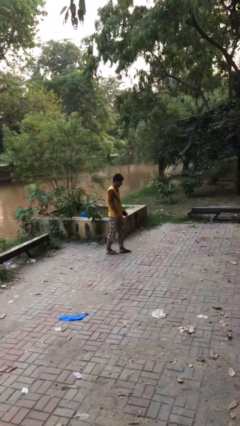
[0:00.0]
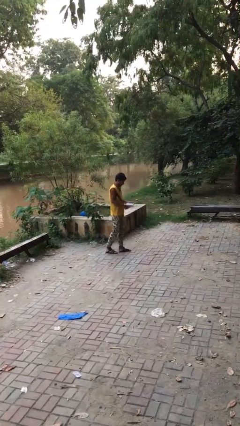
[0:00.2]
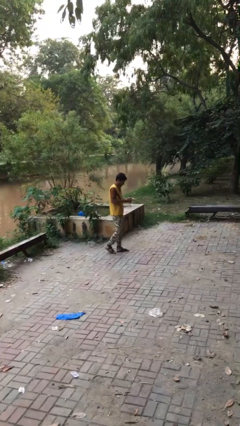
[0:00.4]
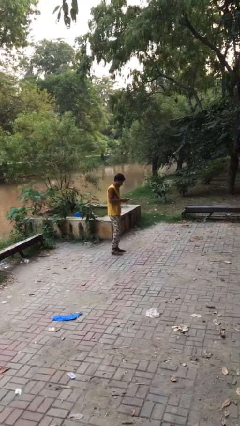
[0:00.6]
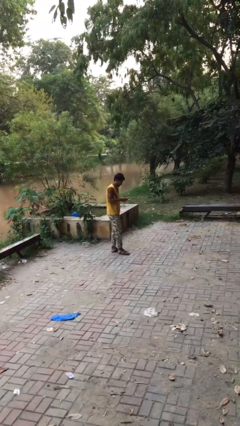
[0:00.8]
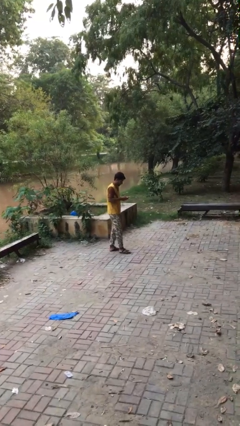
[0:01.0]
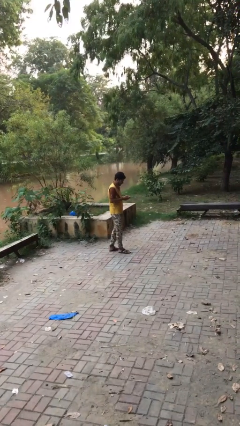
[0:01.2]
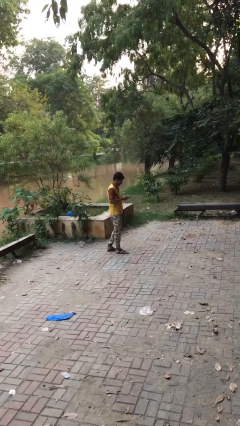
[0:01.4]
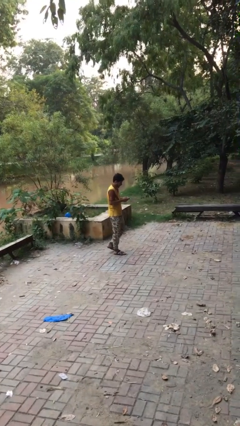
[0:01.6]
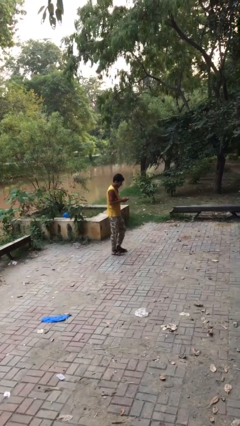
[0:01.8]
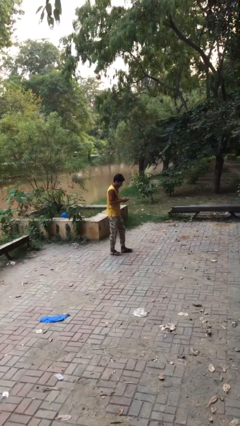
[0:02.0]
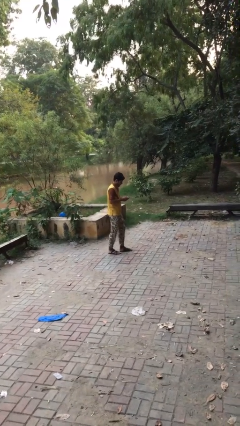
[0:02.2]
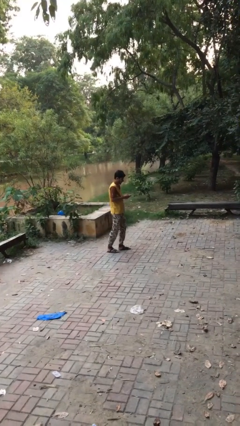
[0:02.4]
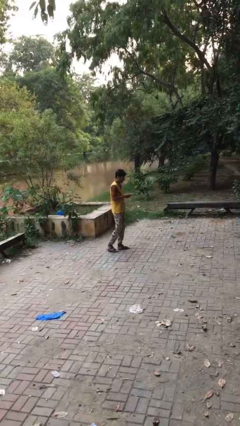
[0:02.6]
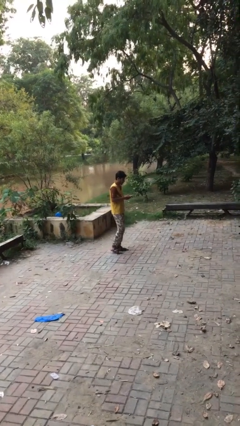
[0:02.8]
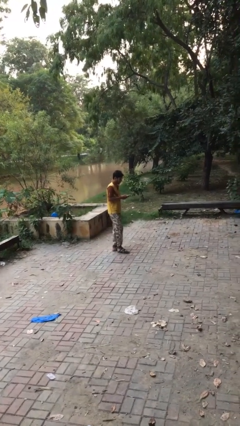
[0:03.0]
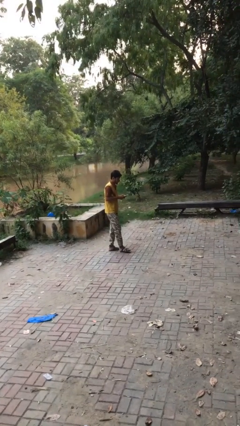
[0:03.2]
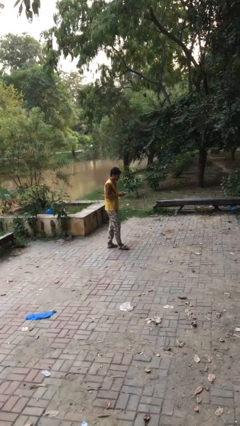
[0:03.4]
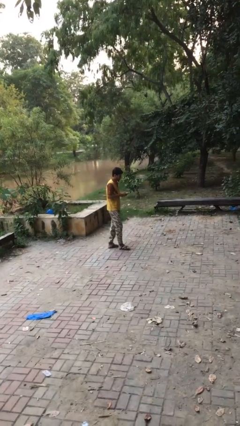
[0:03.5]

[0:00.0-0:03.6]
person texts on phone

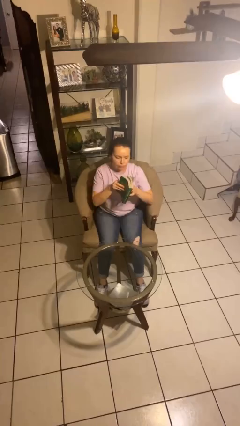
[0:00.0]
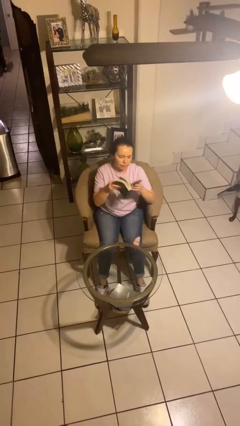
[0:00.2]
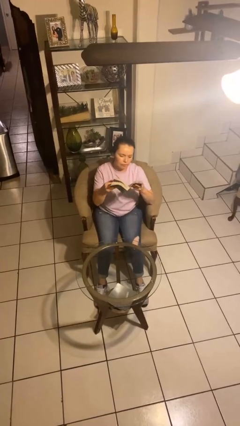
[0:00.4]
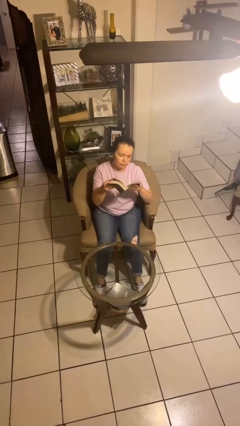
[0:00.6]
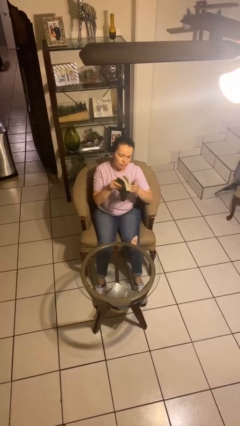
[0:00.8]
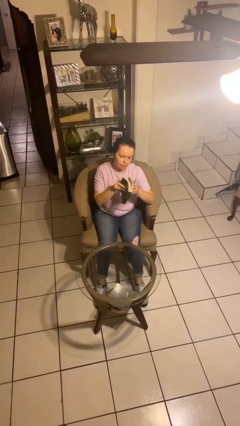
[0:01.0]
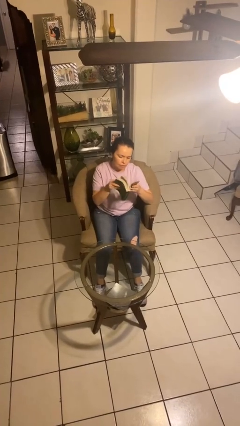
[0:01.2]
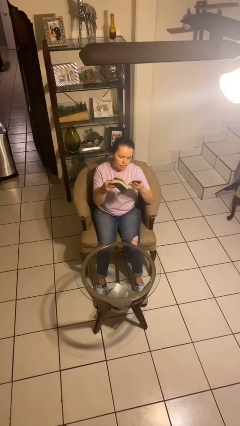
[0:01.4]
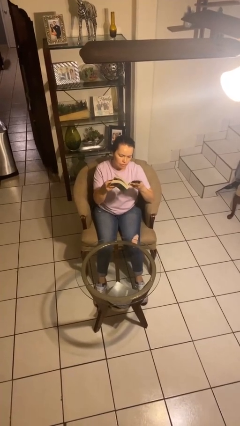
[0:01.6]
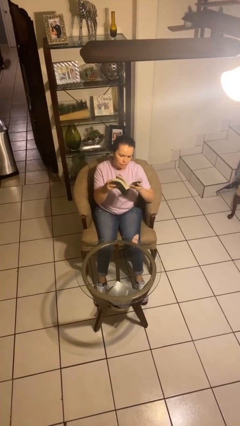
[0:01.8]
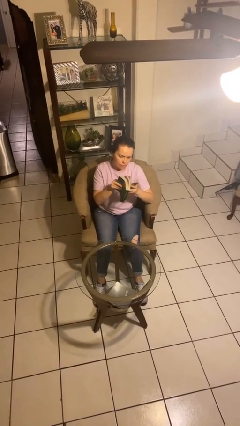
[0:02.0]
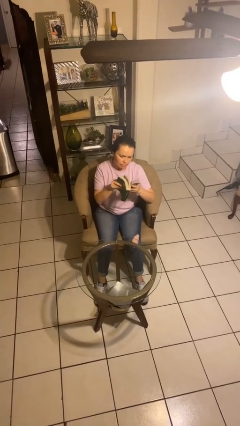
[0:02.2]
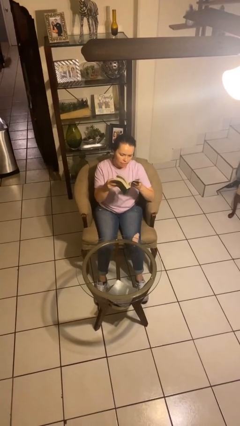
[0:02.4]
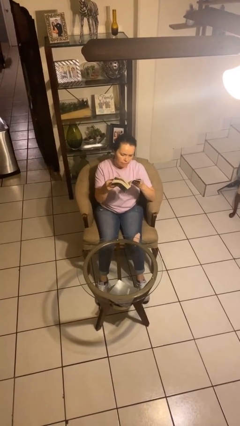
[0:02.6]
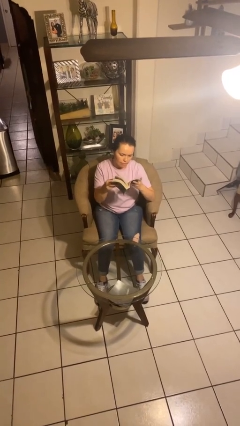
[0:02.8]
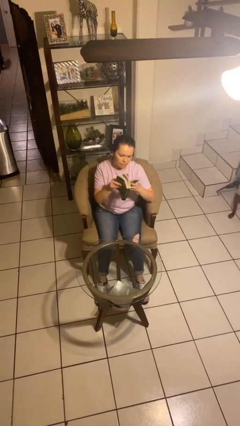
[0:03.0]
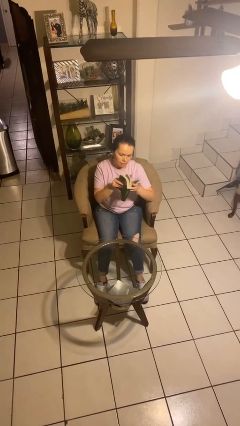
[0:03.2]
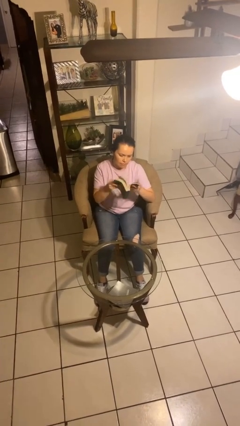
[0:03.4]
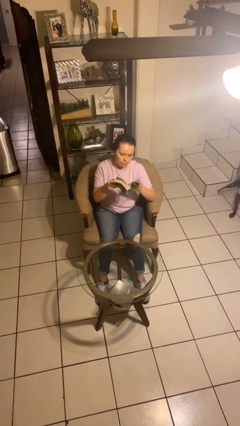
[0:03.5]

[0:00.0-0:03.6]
person reads book

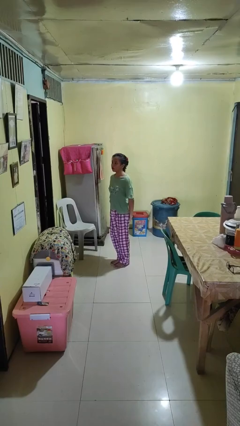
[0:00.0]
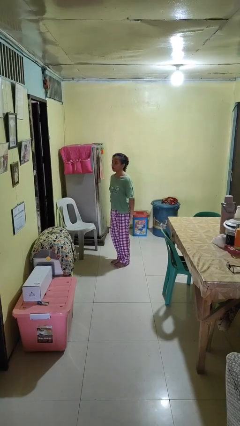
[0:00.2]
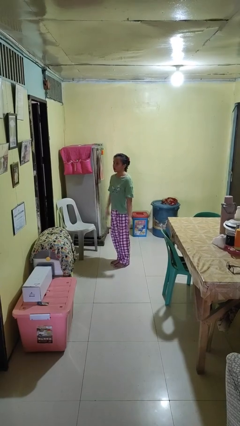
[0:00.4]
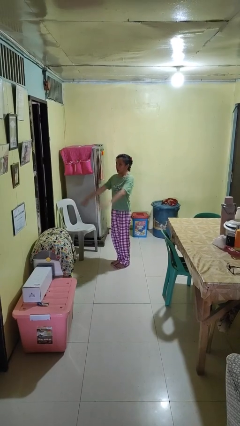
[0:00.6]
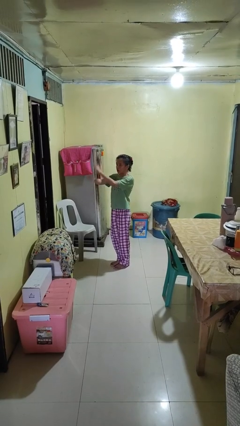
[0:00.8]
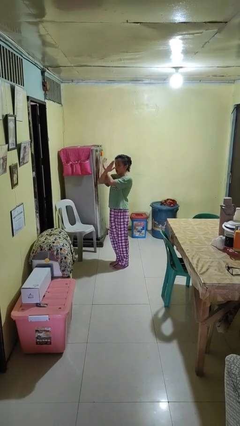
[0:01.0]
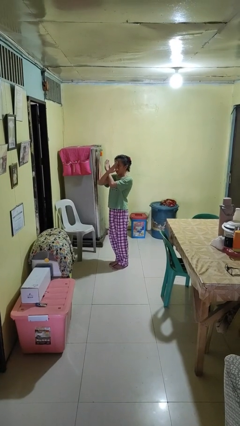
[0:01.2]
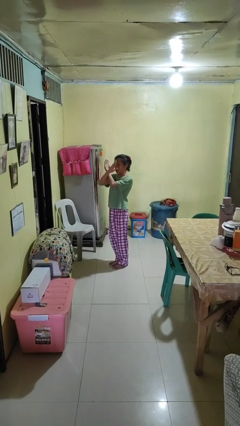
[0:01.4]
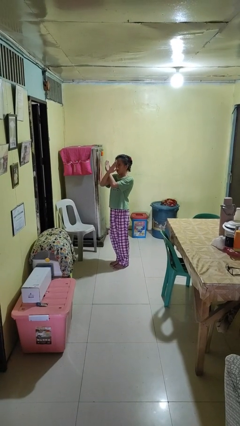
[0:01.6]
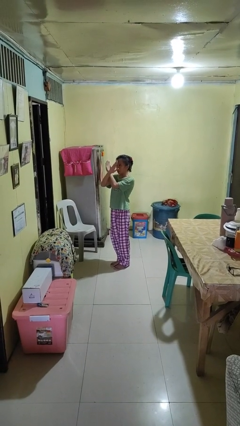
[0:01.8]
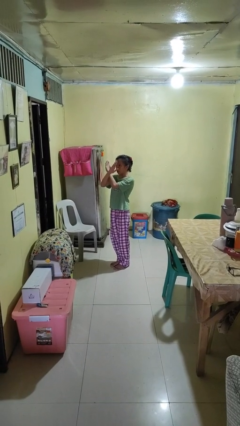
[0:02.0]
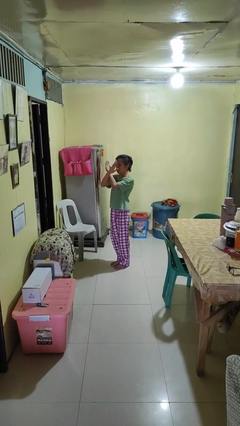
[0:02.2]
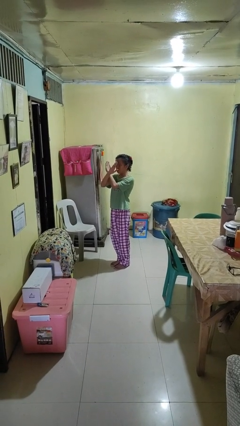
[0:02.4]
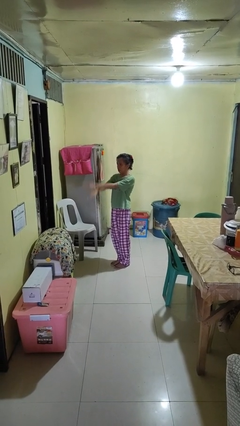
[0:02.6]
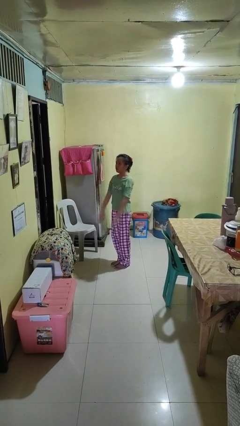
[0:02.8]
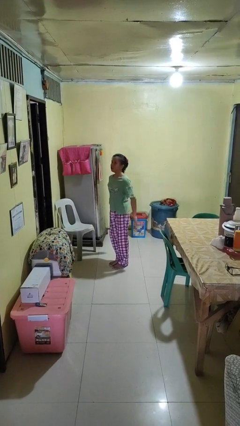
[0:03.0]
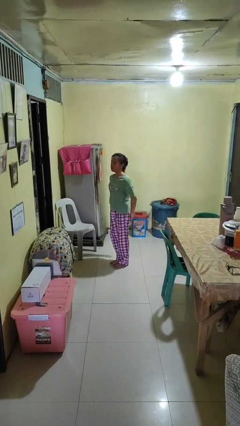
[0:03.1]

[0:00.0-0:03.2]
person gestures arms x

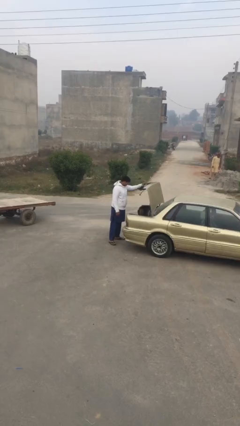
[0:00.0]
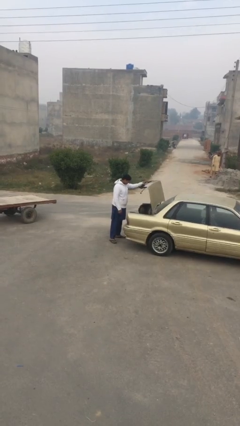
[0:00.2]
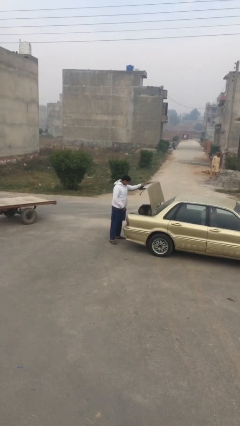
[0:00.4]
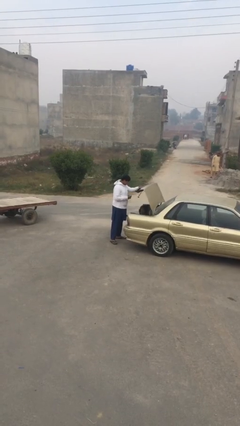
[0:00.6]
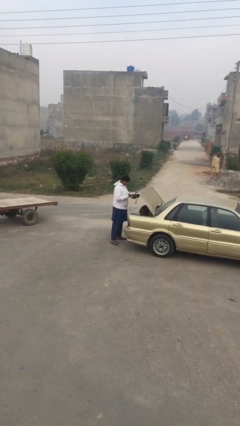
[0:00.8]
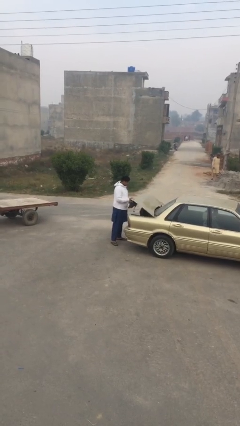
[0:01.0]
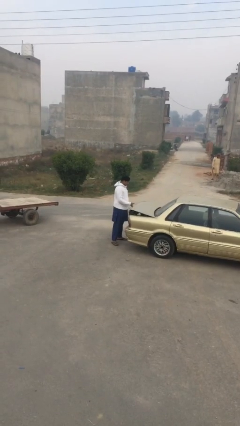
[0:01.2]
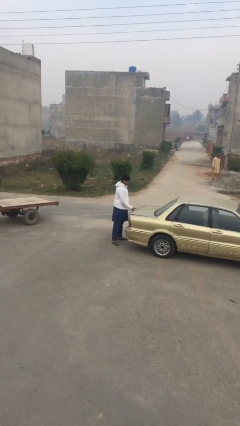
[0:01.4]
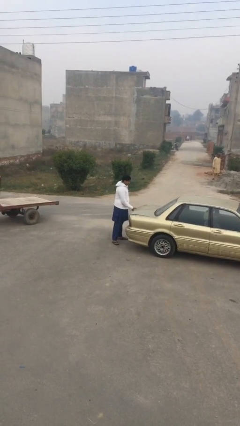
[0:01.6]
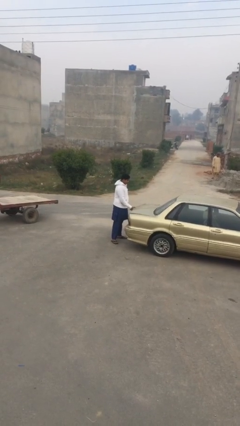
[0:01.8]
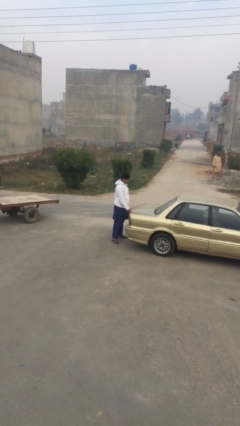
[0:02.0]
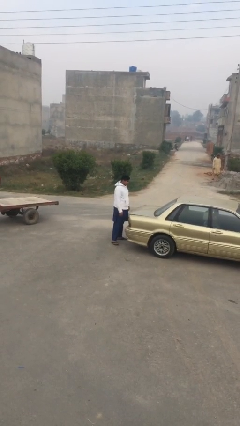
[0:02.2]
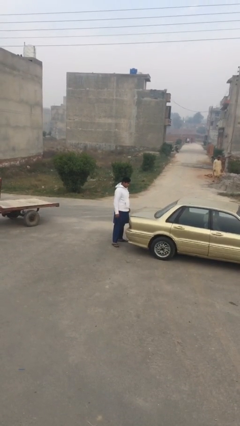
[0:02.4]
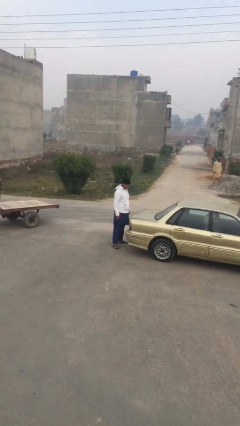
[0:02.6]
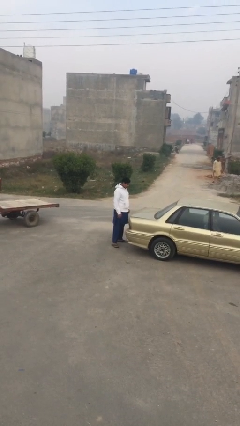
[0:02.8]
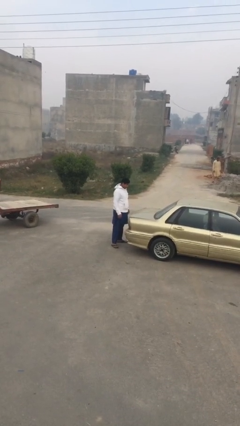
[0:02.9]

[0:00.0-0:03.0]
person closes car trunk

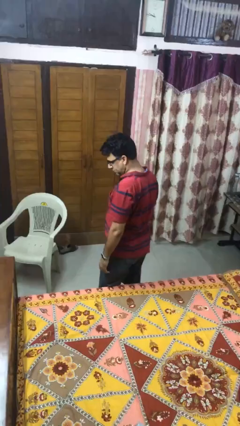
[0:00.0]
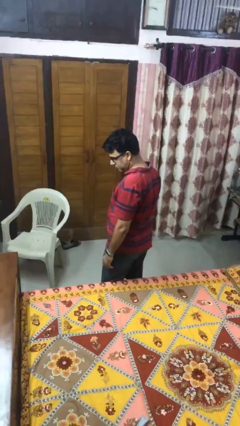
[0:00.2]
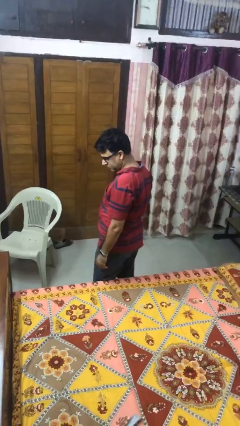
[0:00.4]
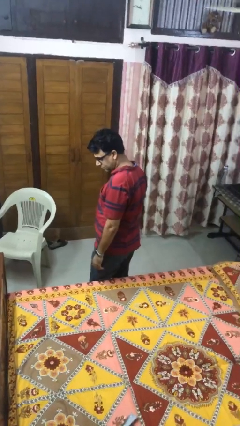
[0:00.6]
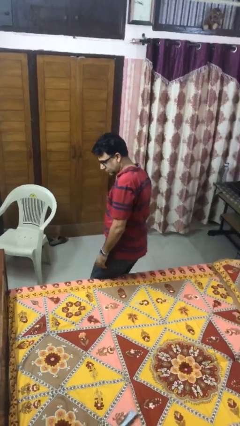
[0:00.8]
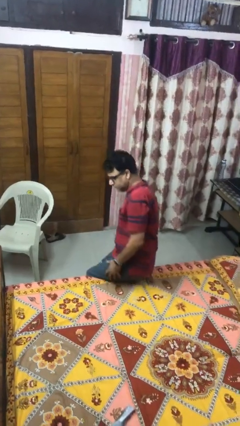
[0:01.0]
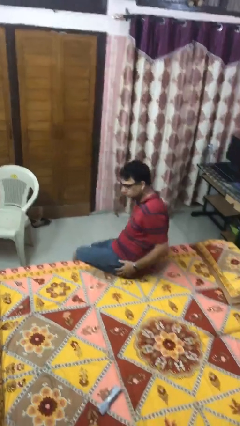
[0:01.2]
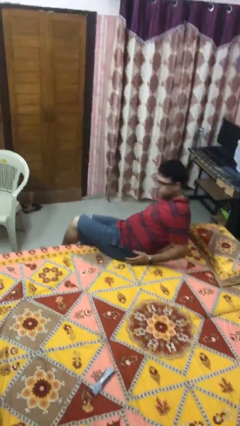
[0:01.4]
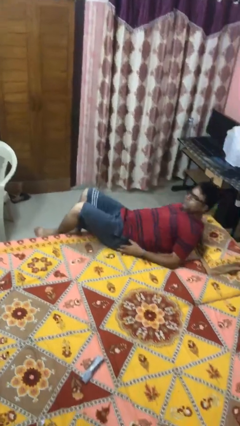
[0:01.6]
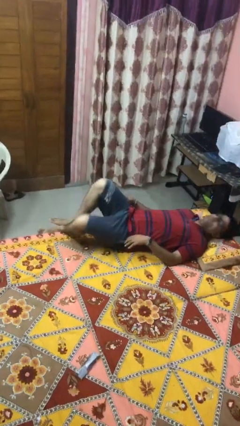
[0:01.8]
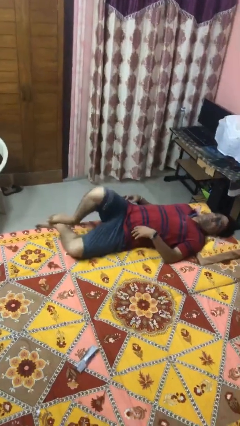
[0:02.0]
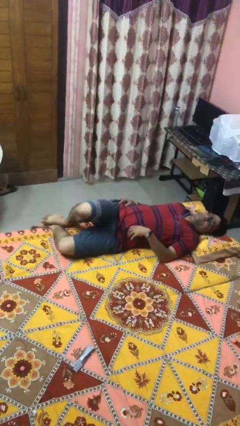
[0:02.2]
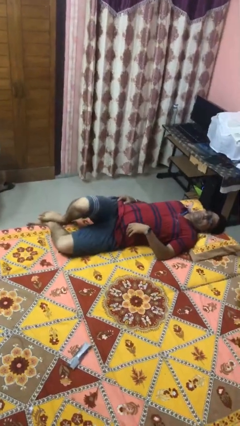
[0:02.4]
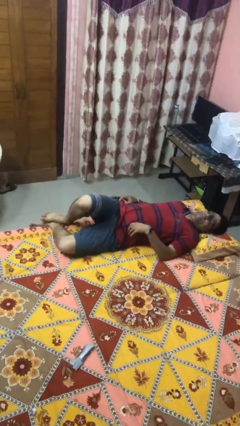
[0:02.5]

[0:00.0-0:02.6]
person lies down on bed

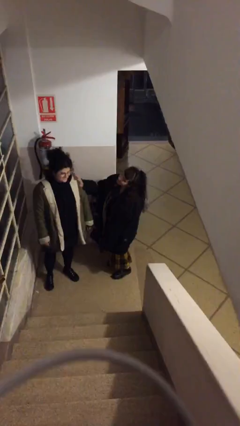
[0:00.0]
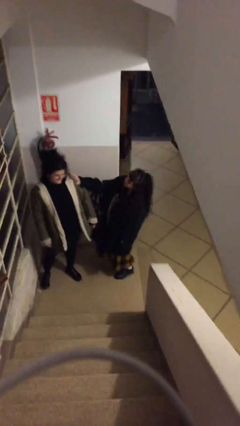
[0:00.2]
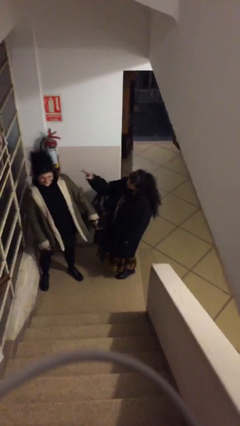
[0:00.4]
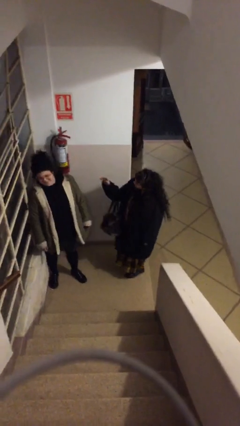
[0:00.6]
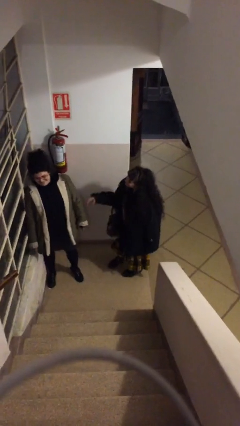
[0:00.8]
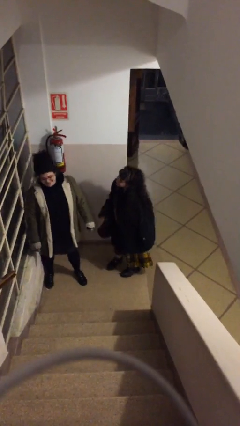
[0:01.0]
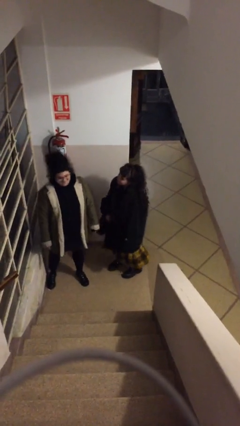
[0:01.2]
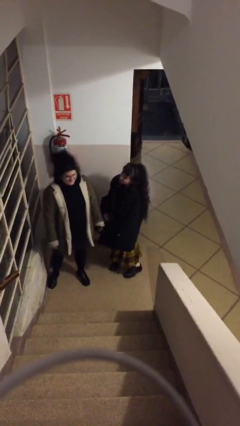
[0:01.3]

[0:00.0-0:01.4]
person shoves person
